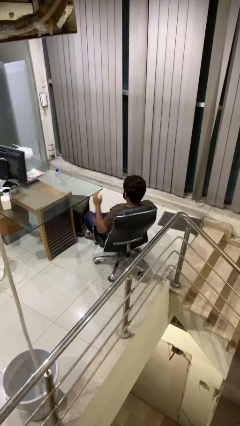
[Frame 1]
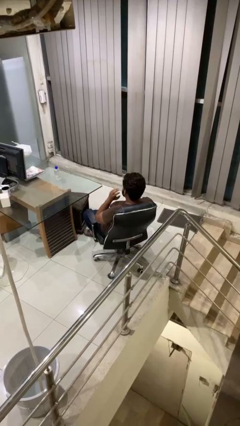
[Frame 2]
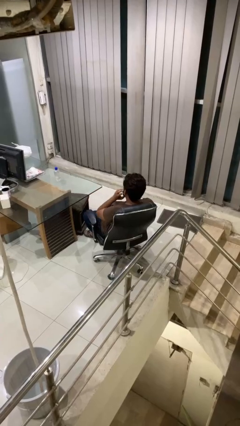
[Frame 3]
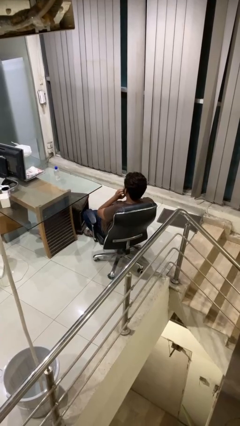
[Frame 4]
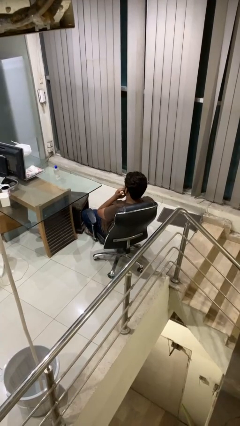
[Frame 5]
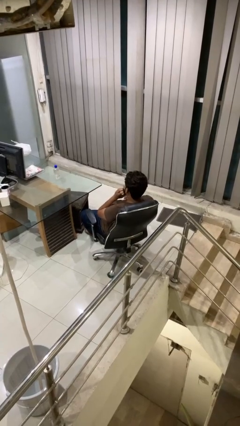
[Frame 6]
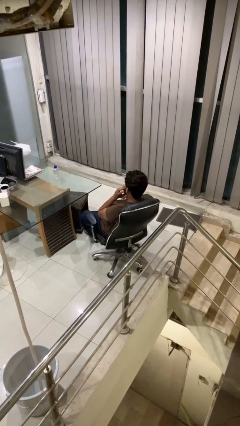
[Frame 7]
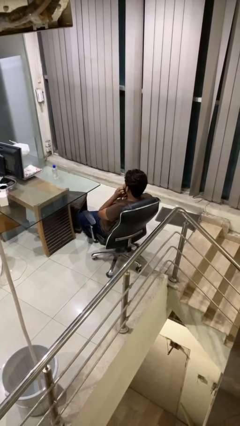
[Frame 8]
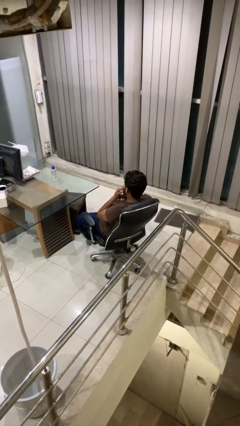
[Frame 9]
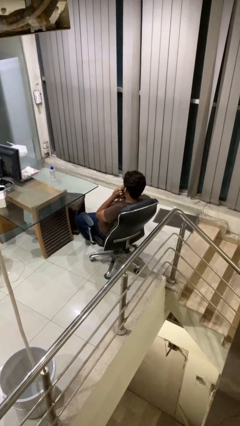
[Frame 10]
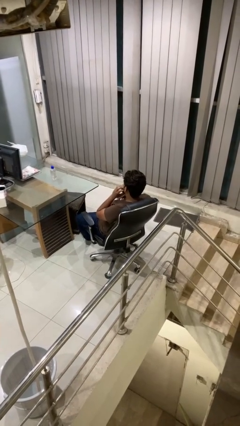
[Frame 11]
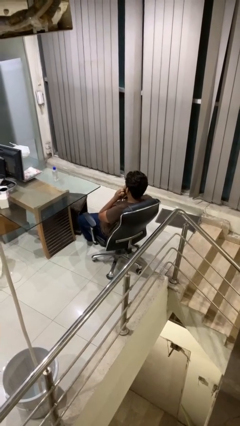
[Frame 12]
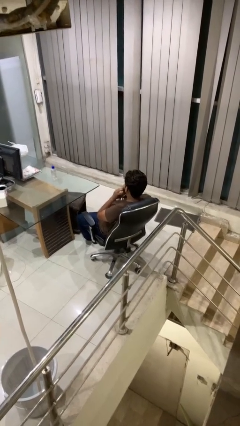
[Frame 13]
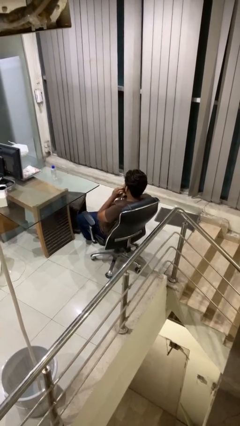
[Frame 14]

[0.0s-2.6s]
person strokes chin

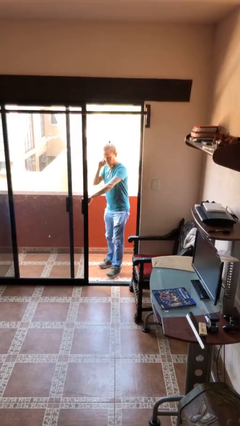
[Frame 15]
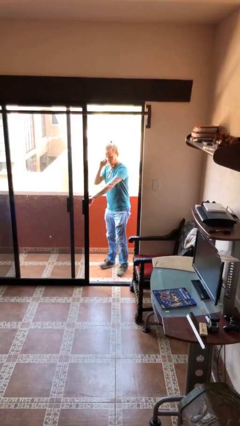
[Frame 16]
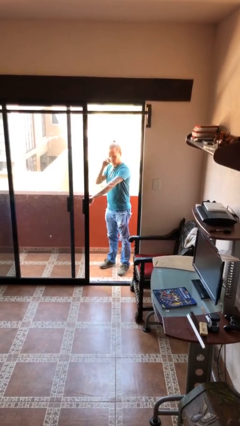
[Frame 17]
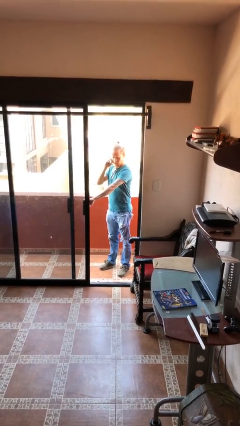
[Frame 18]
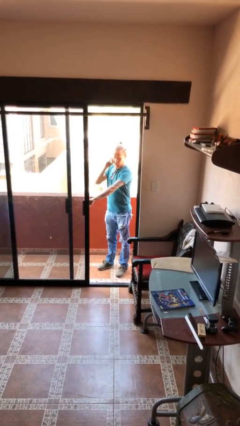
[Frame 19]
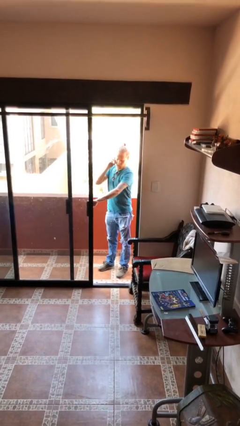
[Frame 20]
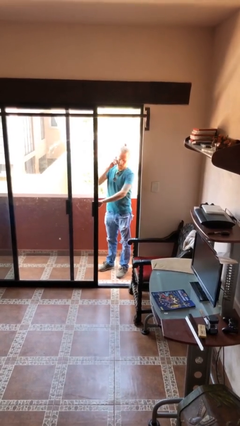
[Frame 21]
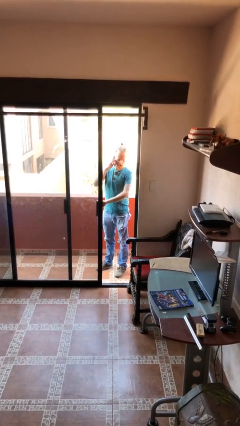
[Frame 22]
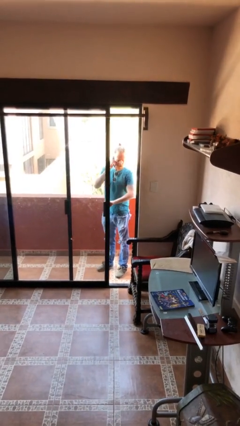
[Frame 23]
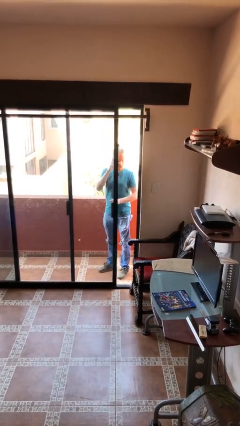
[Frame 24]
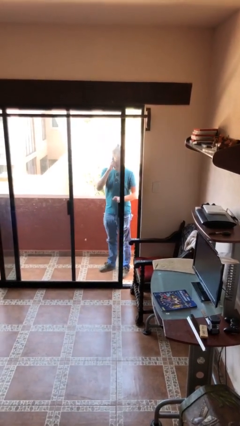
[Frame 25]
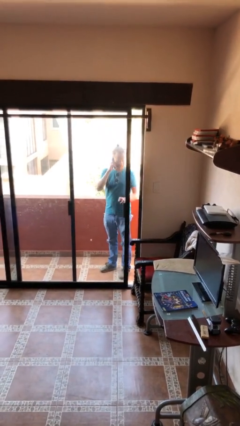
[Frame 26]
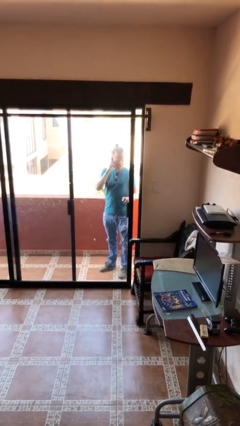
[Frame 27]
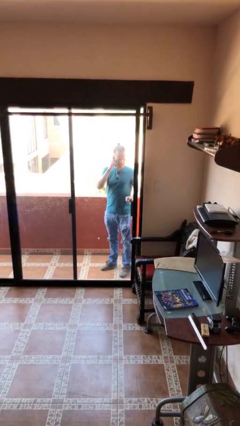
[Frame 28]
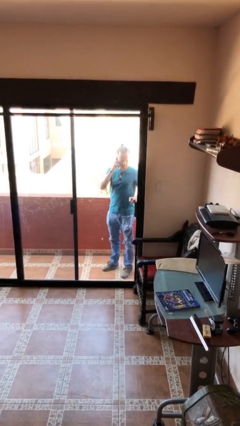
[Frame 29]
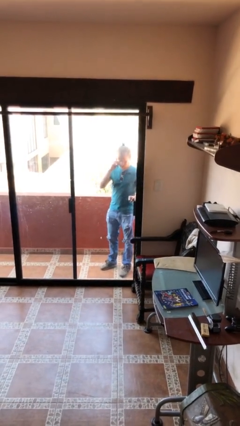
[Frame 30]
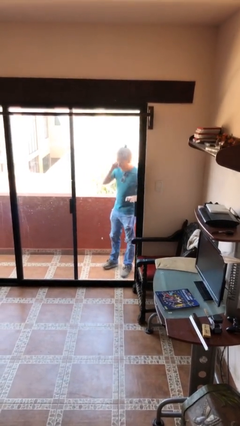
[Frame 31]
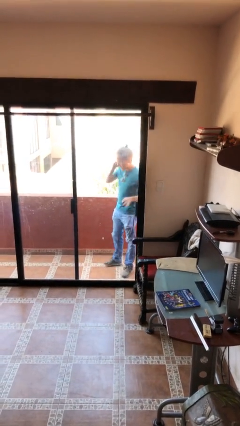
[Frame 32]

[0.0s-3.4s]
person closes facility door

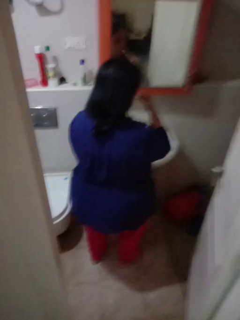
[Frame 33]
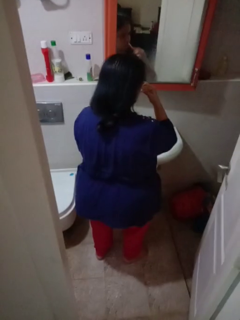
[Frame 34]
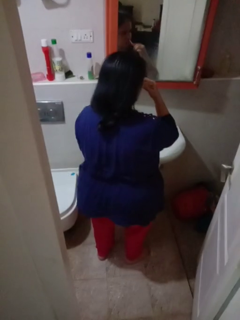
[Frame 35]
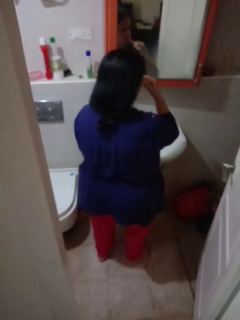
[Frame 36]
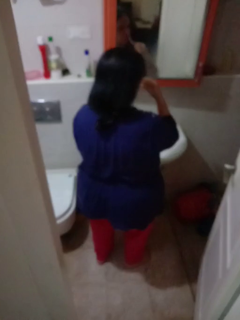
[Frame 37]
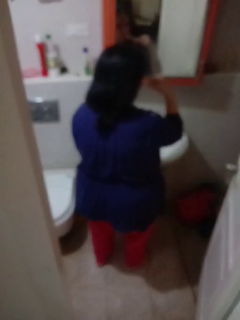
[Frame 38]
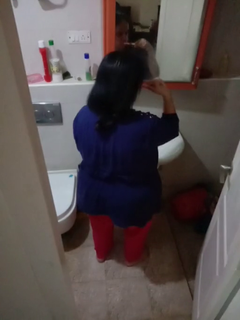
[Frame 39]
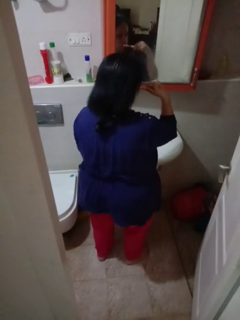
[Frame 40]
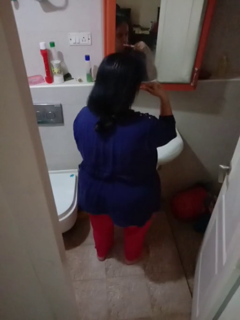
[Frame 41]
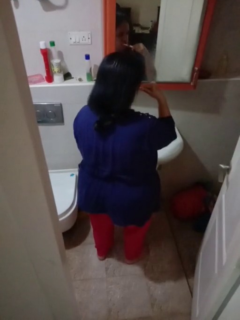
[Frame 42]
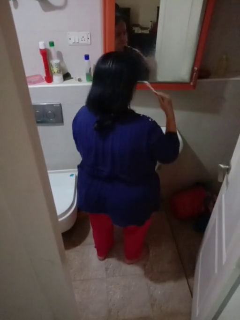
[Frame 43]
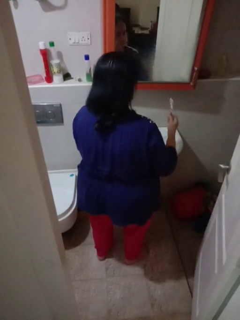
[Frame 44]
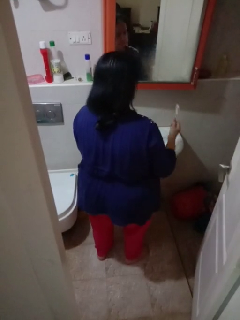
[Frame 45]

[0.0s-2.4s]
person brushes teeth

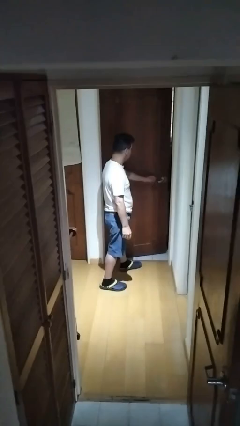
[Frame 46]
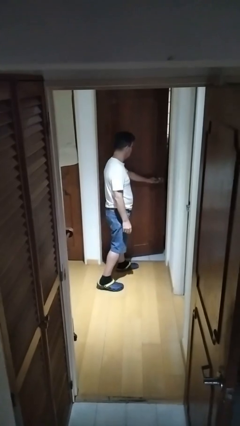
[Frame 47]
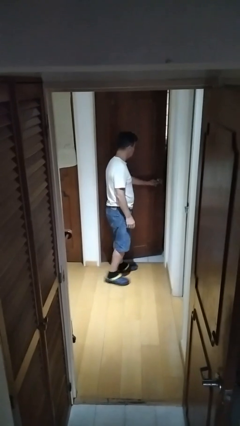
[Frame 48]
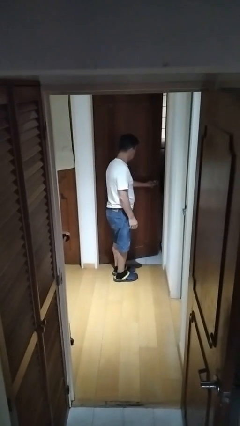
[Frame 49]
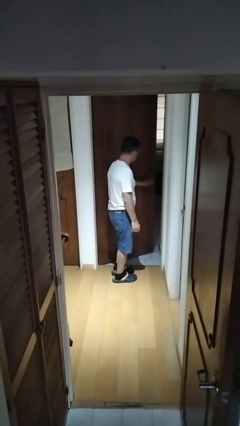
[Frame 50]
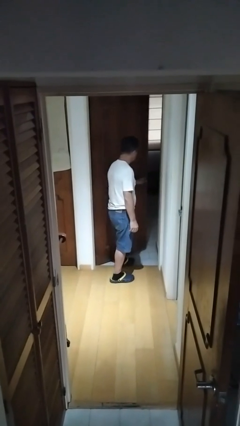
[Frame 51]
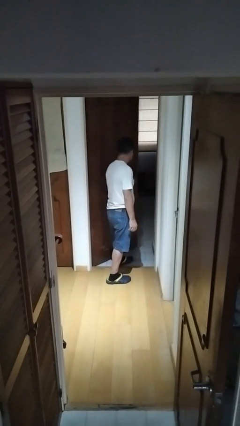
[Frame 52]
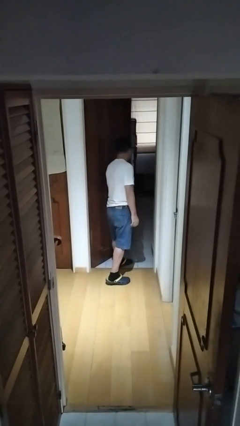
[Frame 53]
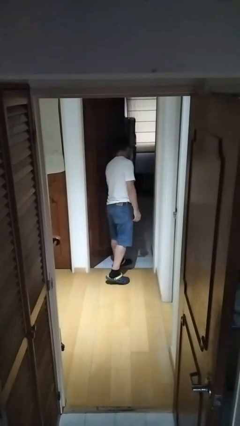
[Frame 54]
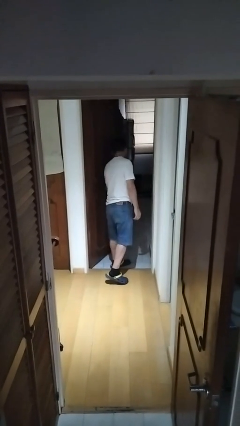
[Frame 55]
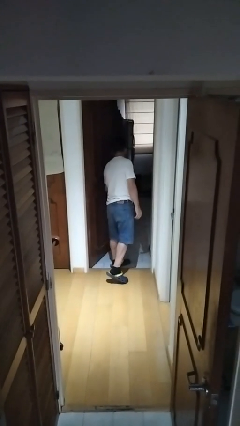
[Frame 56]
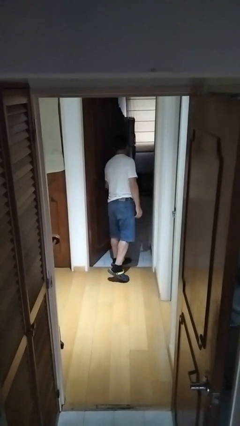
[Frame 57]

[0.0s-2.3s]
person opens facility door

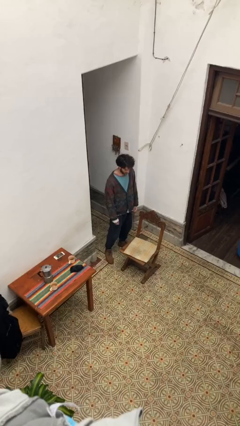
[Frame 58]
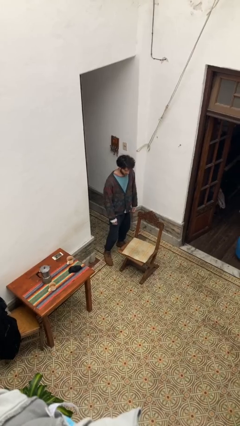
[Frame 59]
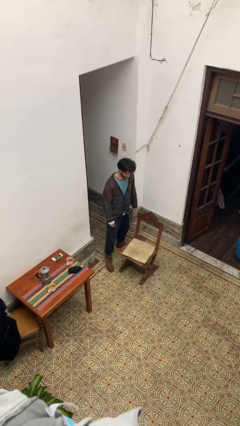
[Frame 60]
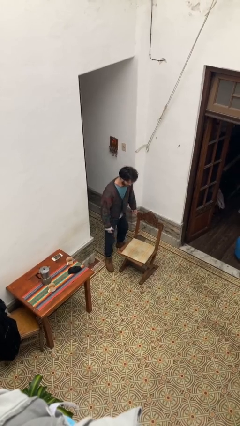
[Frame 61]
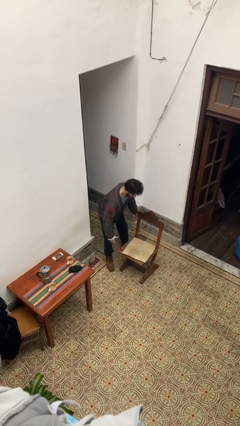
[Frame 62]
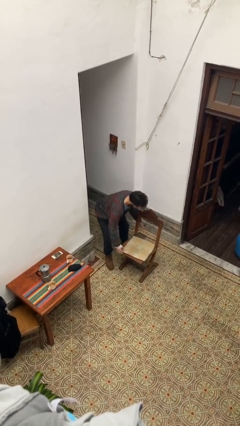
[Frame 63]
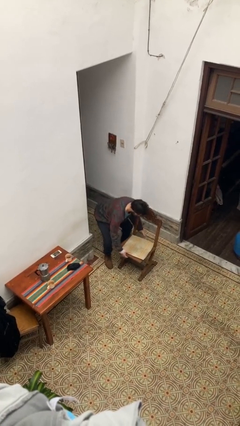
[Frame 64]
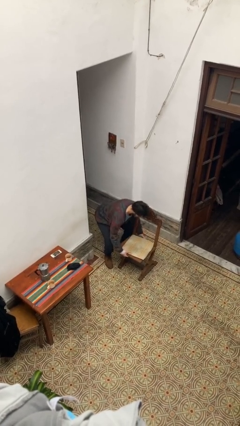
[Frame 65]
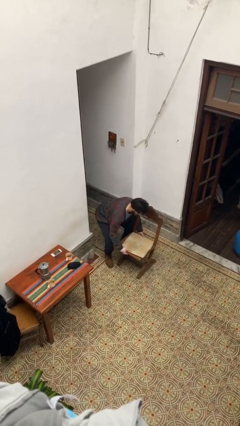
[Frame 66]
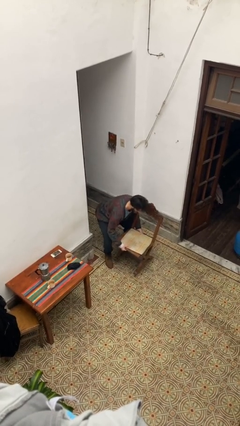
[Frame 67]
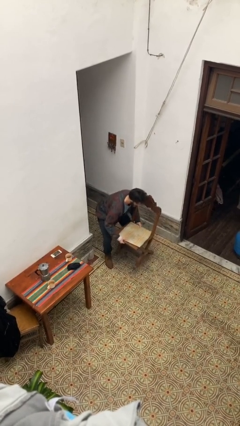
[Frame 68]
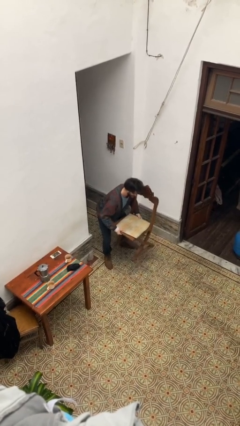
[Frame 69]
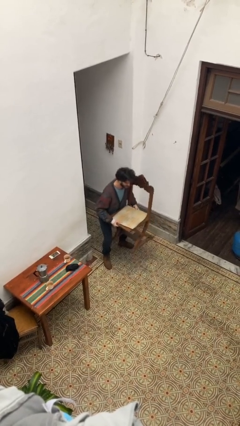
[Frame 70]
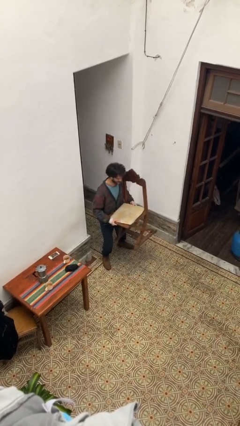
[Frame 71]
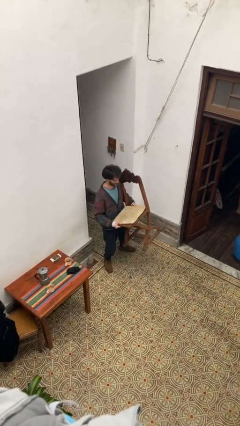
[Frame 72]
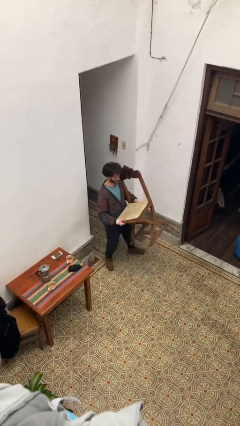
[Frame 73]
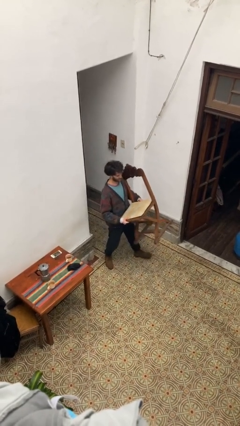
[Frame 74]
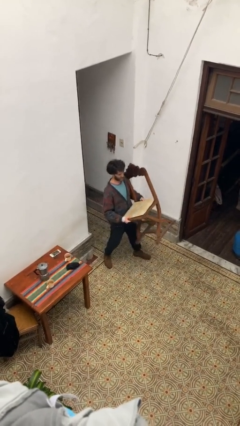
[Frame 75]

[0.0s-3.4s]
person picks up object from floor

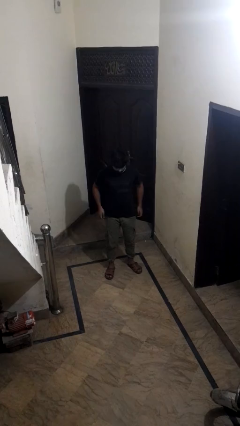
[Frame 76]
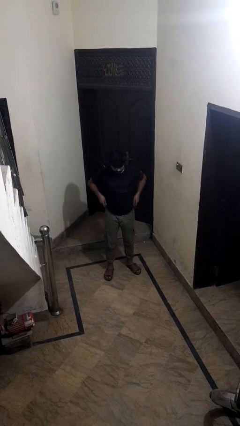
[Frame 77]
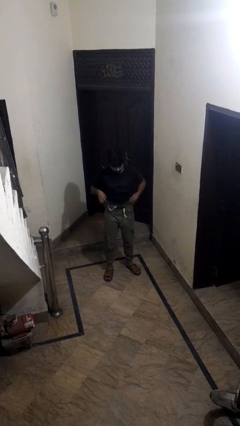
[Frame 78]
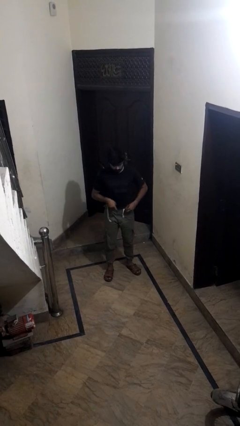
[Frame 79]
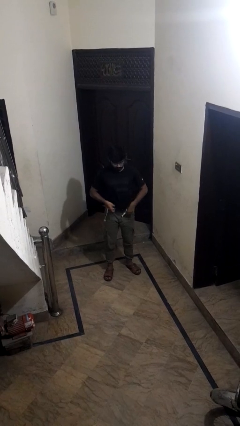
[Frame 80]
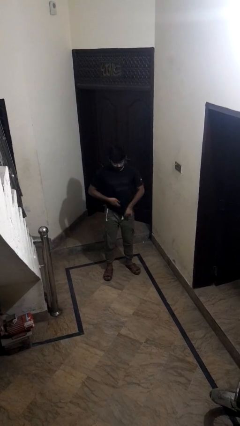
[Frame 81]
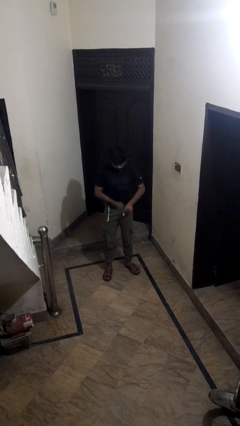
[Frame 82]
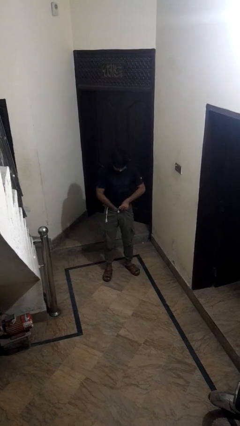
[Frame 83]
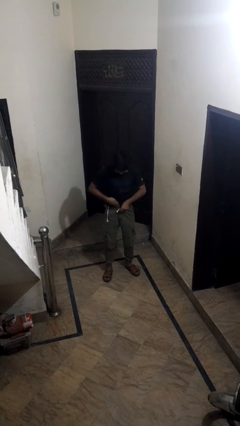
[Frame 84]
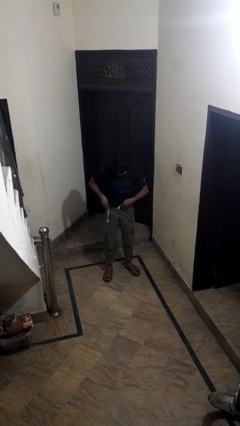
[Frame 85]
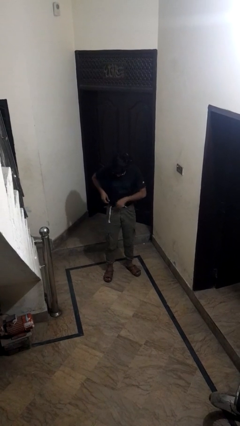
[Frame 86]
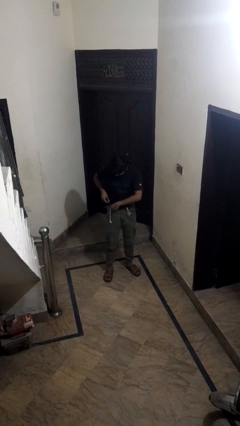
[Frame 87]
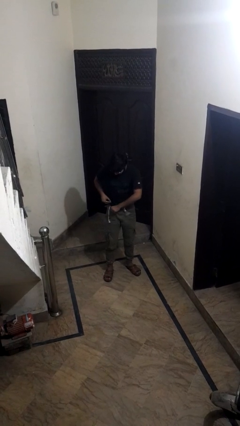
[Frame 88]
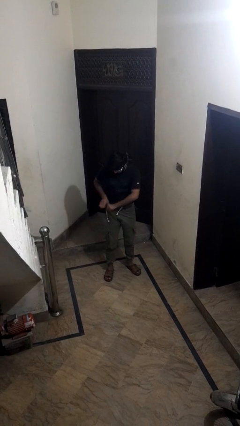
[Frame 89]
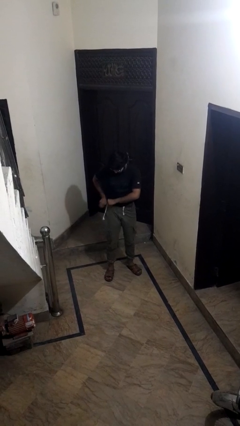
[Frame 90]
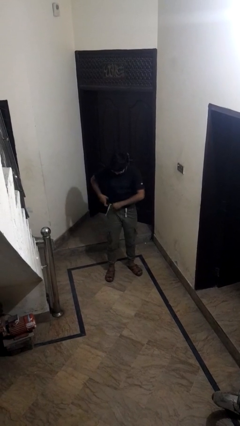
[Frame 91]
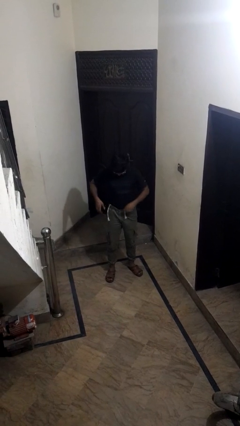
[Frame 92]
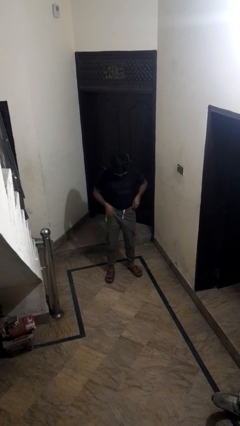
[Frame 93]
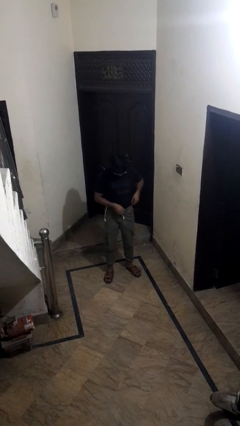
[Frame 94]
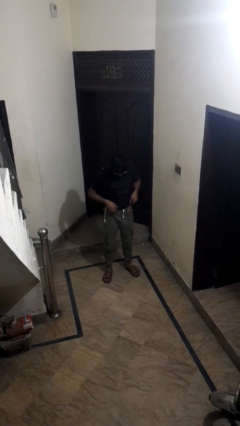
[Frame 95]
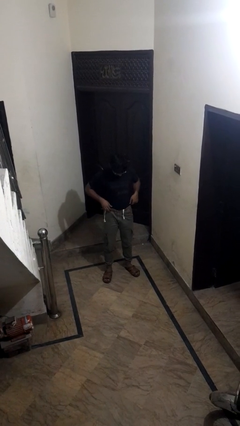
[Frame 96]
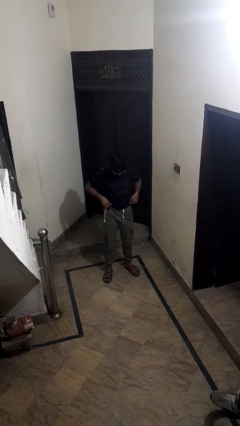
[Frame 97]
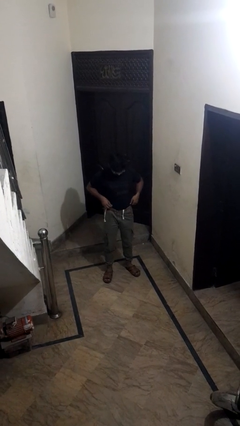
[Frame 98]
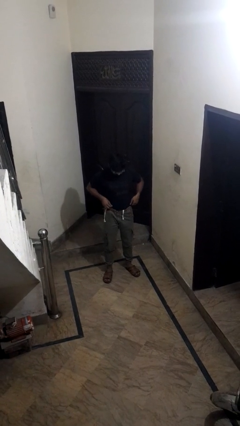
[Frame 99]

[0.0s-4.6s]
person tucks in shirt
